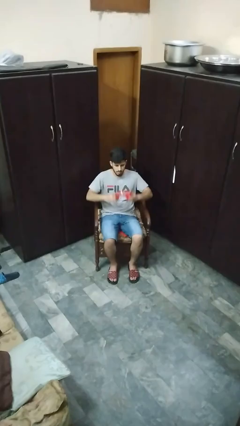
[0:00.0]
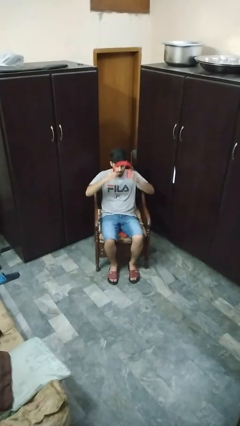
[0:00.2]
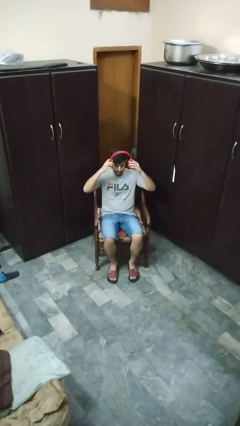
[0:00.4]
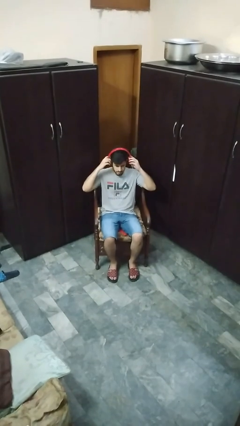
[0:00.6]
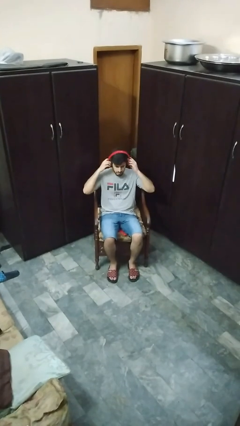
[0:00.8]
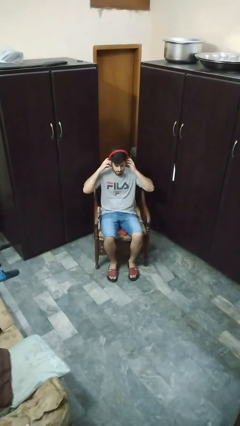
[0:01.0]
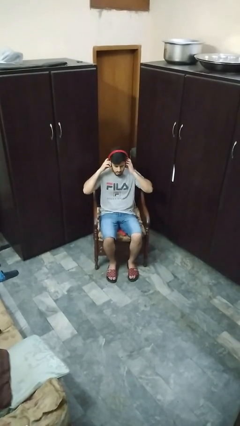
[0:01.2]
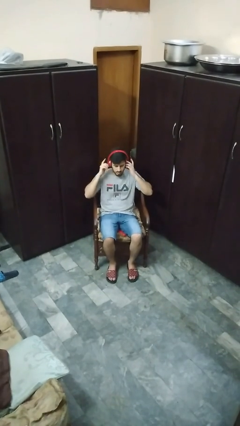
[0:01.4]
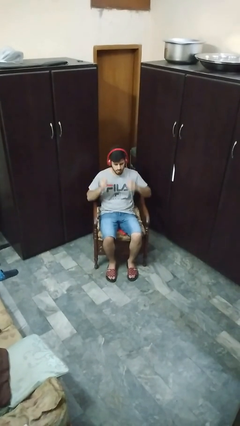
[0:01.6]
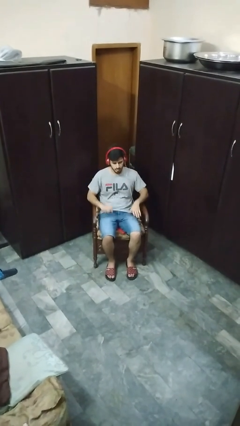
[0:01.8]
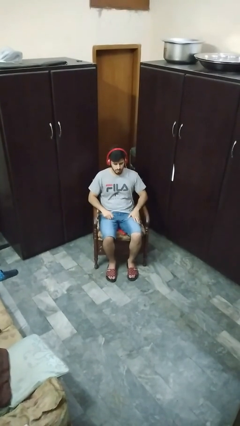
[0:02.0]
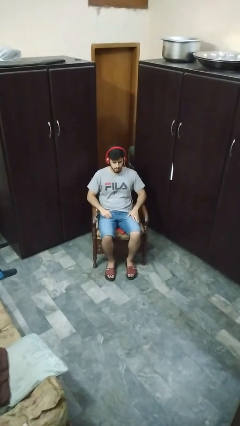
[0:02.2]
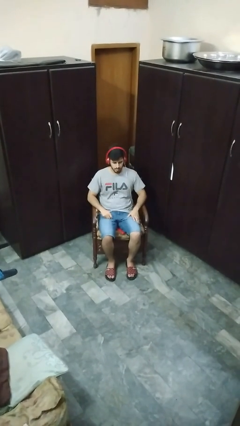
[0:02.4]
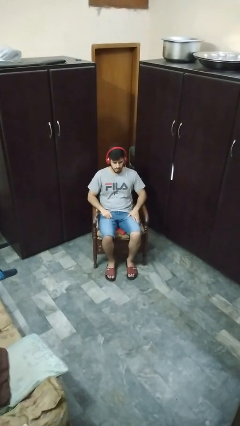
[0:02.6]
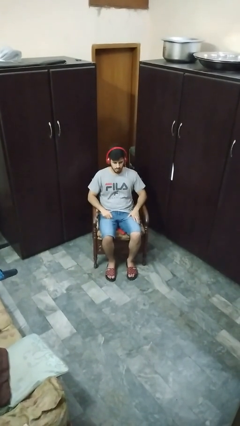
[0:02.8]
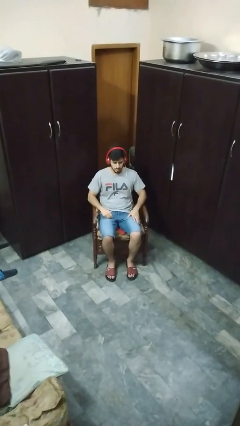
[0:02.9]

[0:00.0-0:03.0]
person puts on headphones

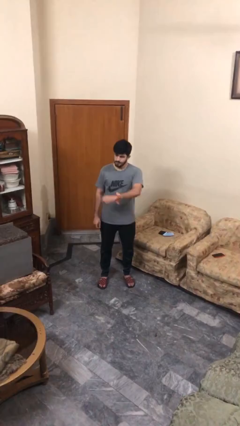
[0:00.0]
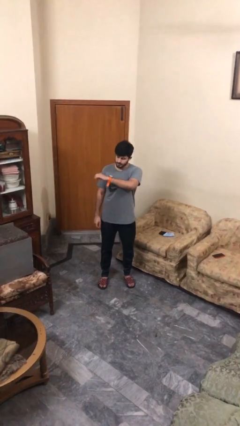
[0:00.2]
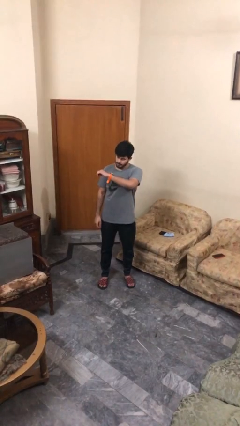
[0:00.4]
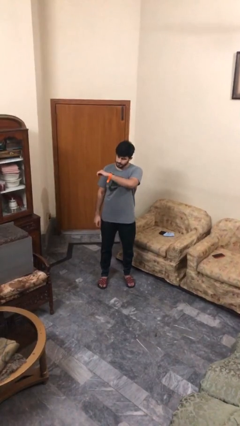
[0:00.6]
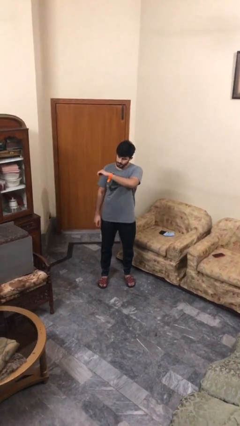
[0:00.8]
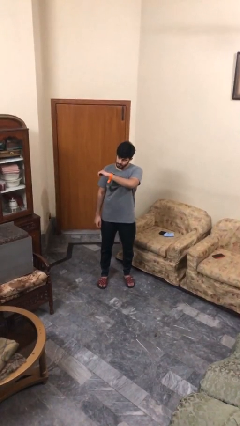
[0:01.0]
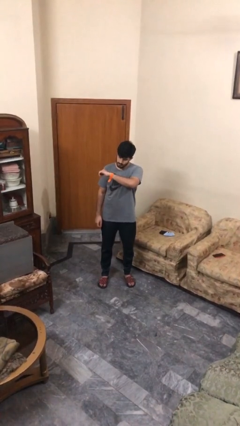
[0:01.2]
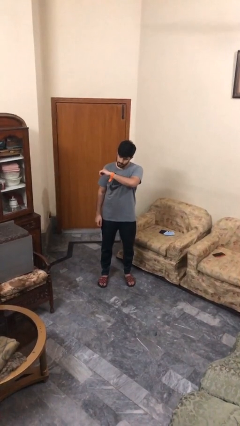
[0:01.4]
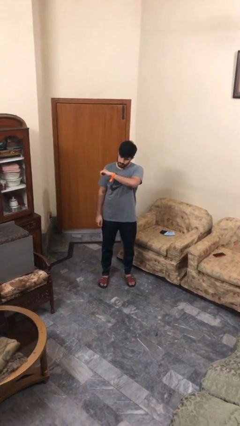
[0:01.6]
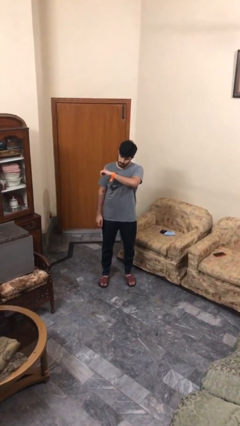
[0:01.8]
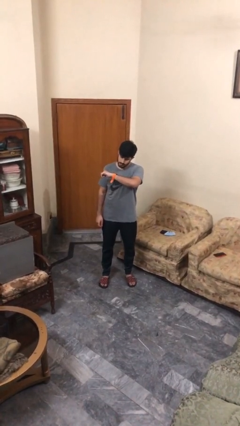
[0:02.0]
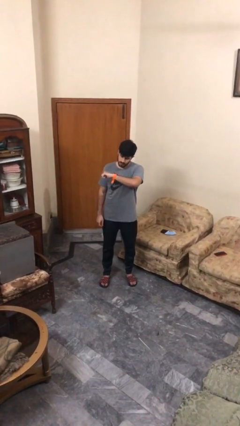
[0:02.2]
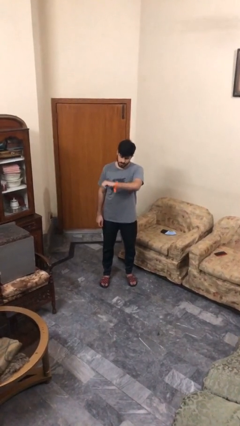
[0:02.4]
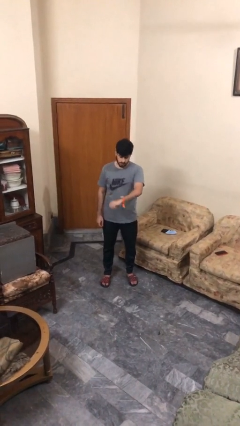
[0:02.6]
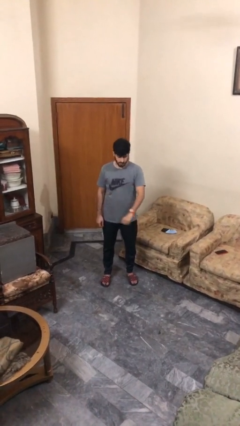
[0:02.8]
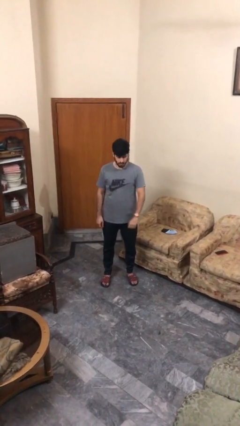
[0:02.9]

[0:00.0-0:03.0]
person looks at wristwatch

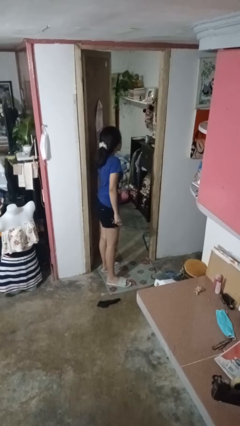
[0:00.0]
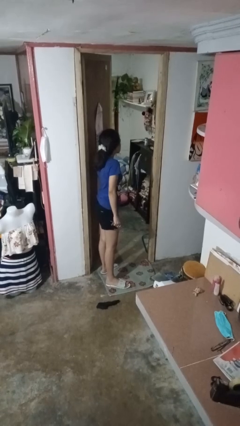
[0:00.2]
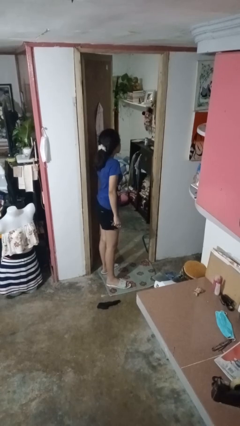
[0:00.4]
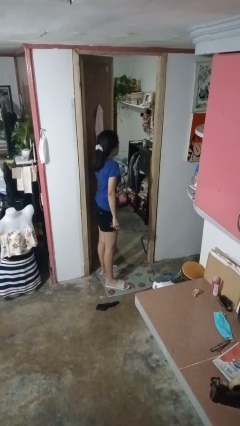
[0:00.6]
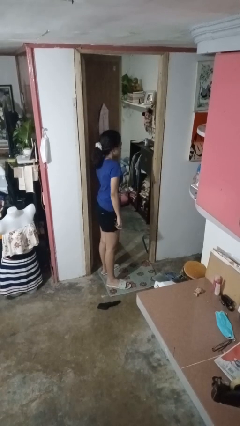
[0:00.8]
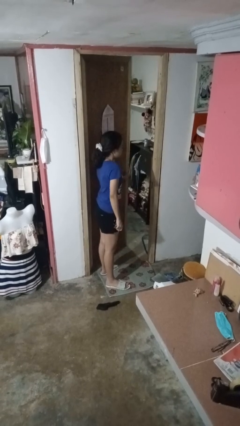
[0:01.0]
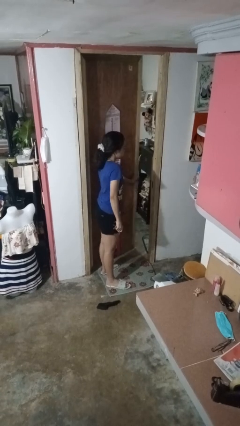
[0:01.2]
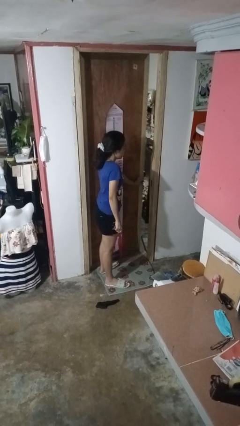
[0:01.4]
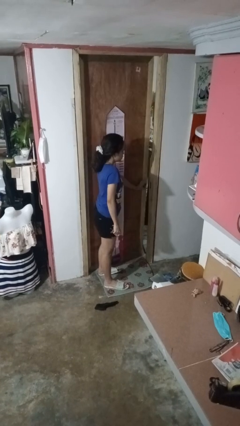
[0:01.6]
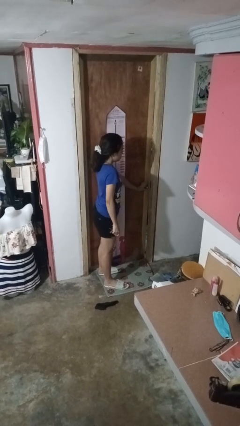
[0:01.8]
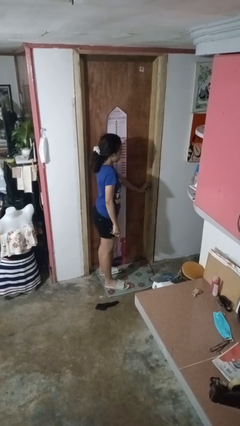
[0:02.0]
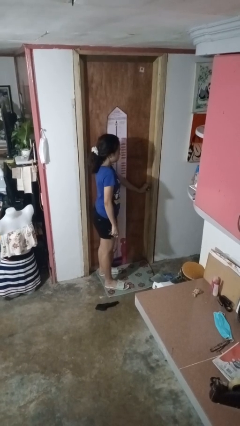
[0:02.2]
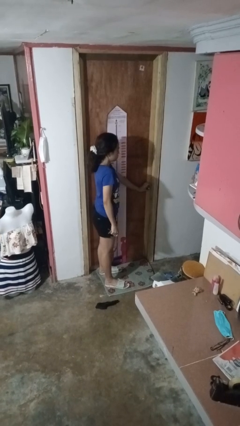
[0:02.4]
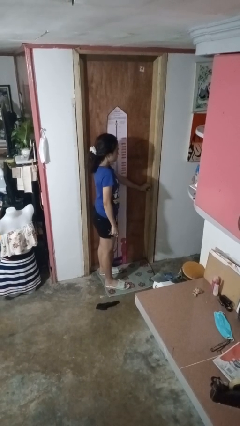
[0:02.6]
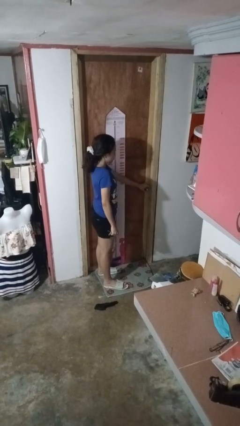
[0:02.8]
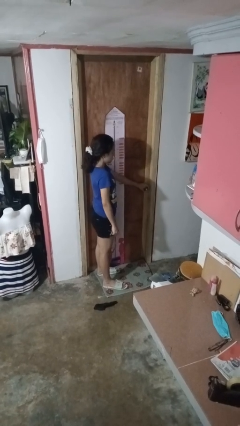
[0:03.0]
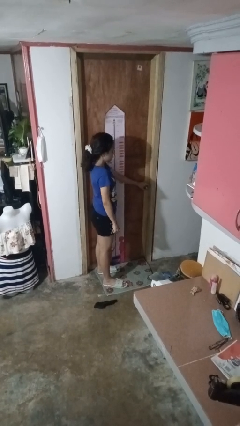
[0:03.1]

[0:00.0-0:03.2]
person closes facility door

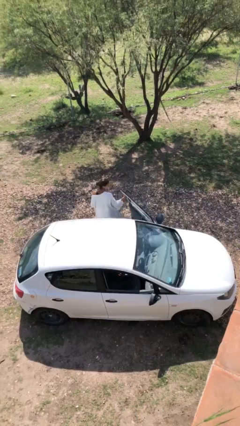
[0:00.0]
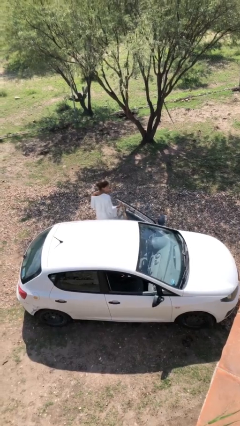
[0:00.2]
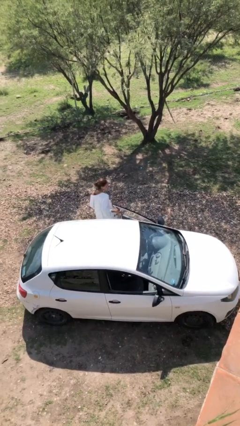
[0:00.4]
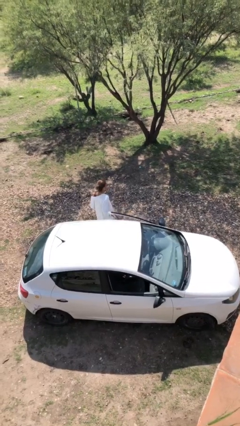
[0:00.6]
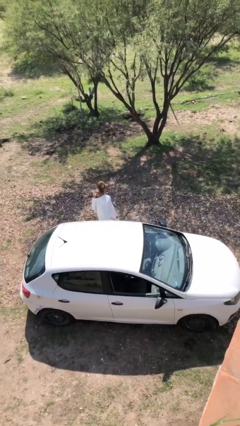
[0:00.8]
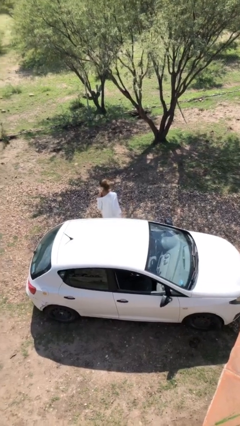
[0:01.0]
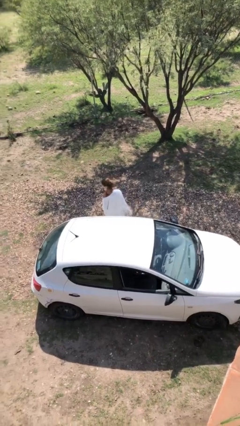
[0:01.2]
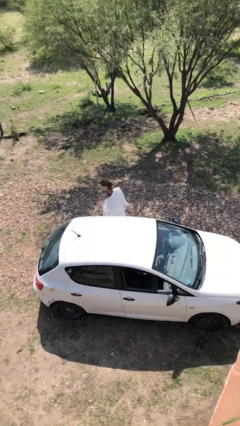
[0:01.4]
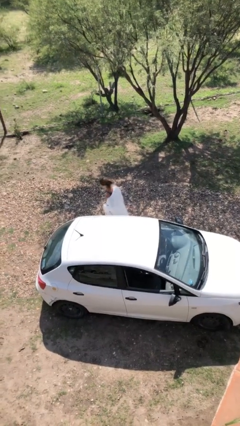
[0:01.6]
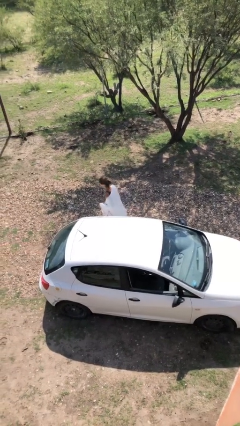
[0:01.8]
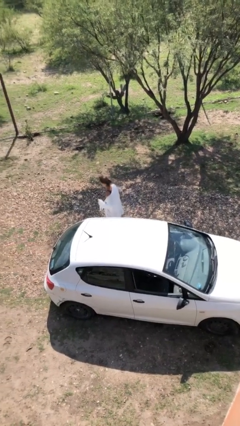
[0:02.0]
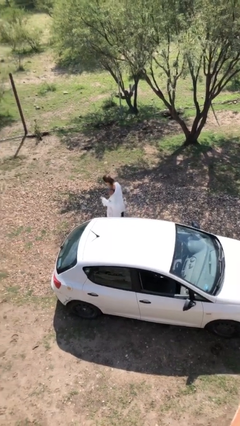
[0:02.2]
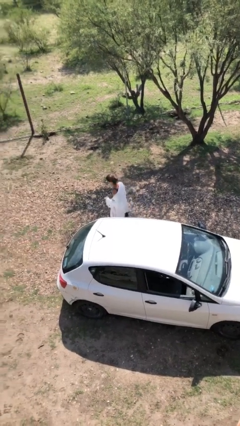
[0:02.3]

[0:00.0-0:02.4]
person closes car door

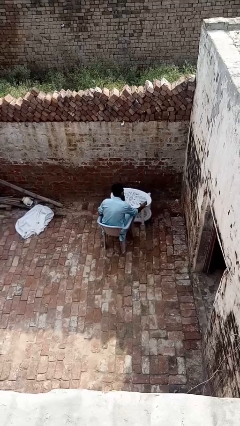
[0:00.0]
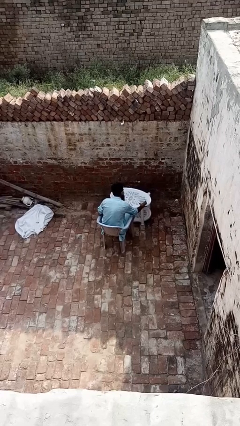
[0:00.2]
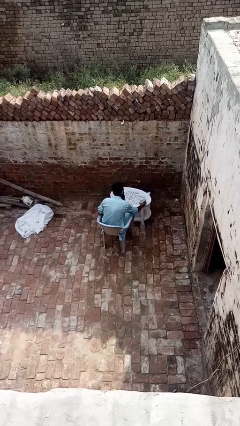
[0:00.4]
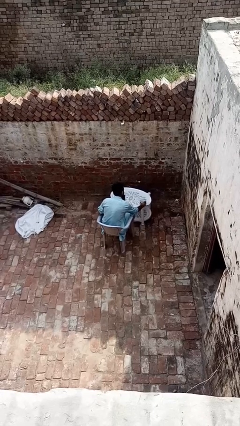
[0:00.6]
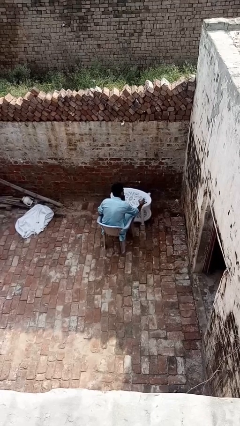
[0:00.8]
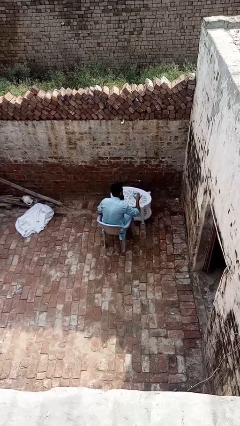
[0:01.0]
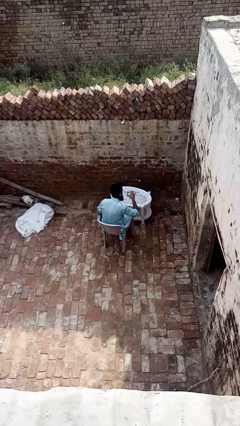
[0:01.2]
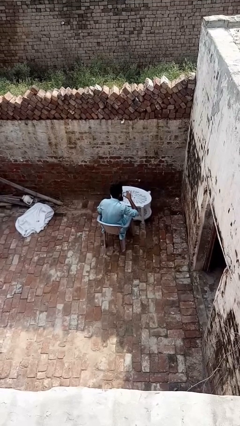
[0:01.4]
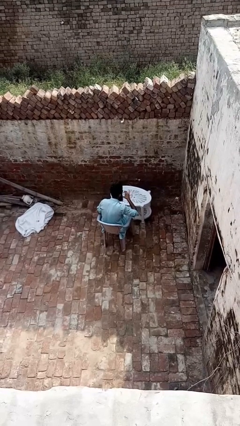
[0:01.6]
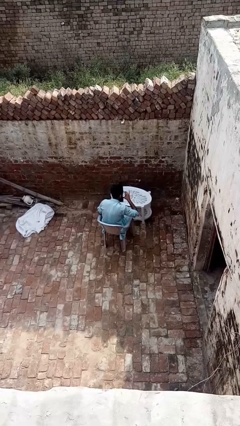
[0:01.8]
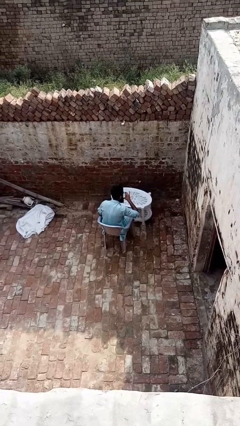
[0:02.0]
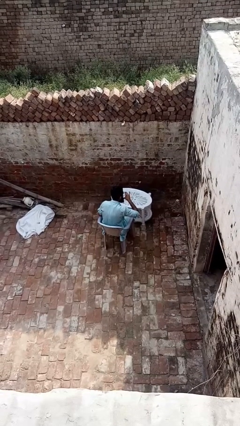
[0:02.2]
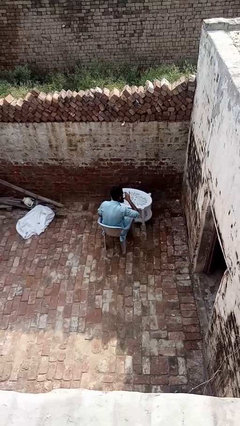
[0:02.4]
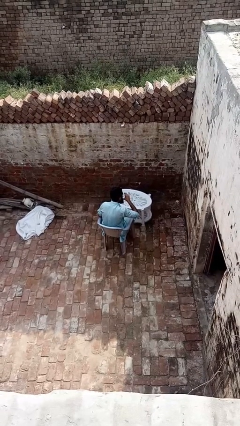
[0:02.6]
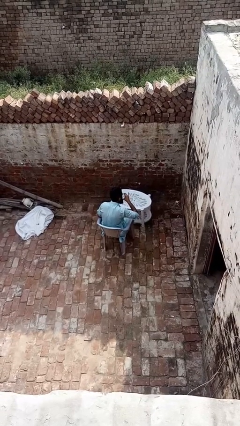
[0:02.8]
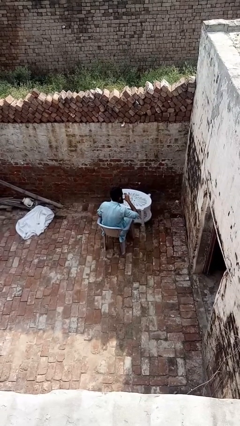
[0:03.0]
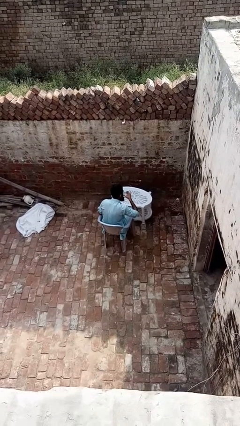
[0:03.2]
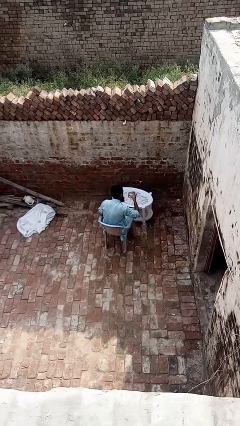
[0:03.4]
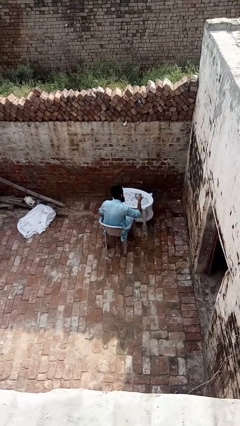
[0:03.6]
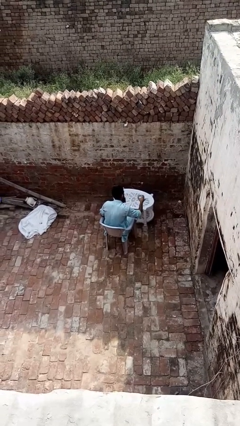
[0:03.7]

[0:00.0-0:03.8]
person drinks from cup

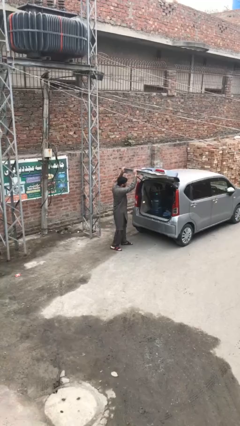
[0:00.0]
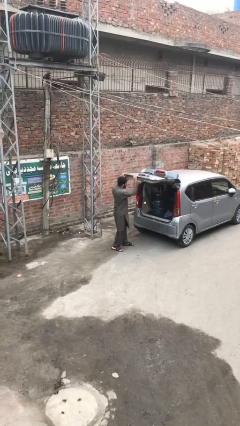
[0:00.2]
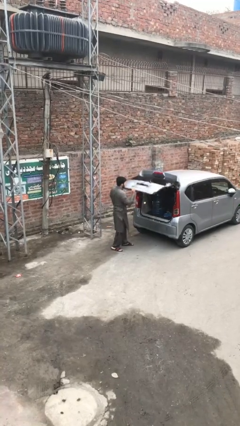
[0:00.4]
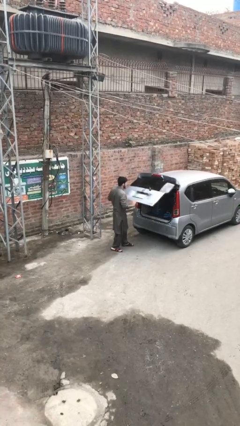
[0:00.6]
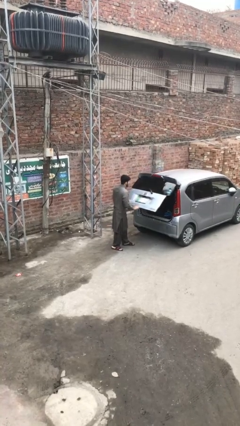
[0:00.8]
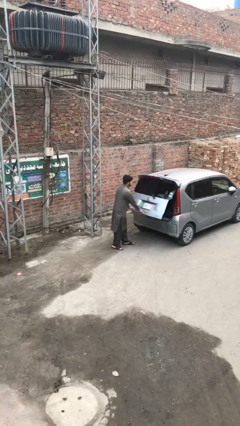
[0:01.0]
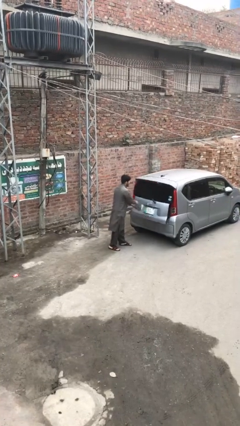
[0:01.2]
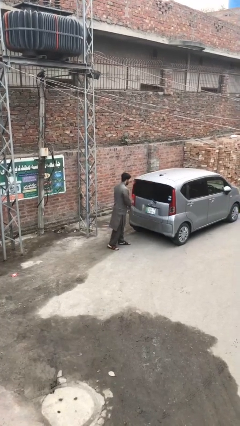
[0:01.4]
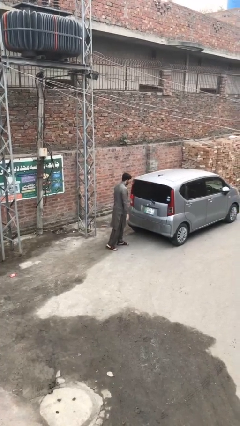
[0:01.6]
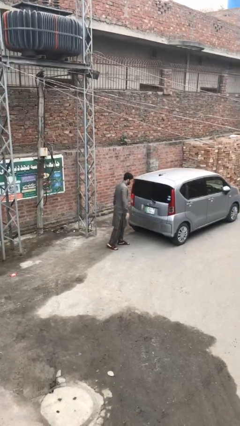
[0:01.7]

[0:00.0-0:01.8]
person closes car trunk
